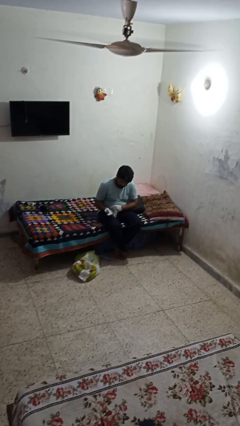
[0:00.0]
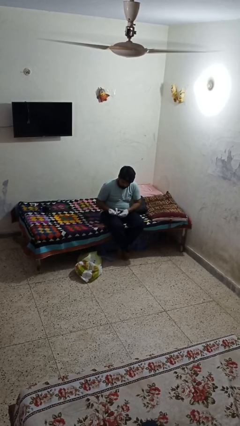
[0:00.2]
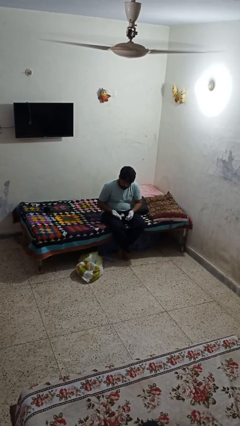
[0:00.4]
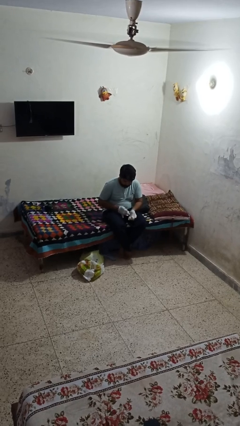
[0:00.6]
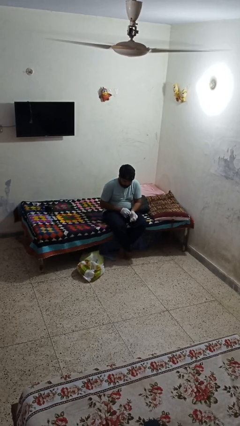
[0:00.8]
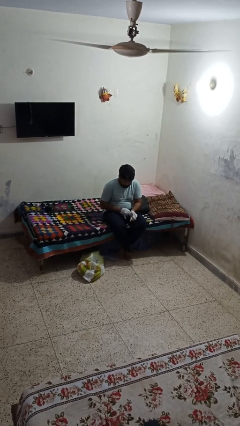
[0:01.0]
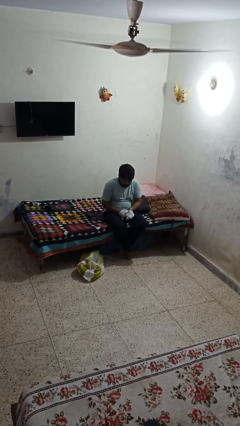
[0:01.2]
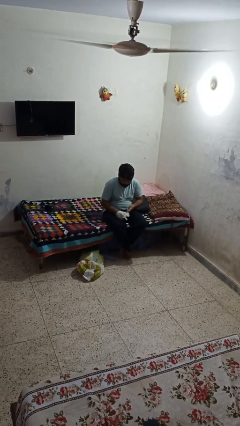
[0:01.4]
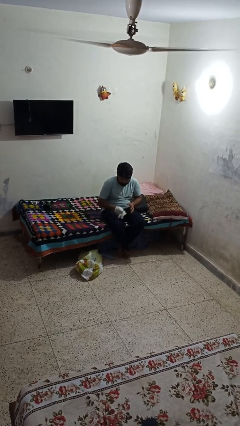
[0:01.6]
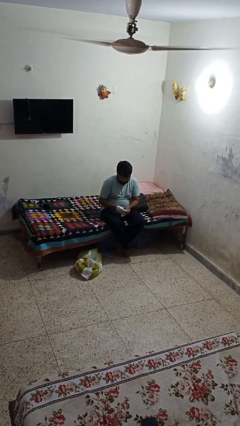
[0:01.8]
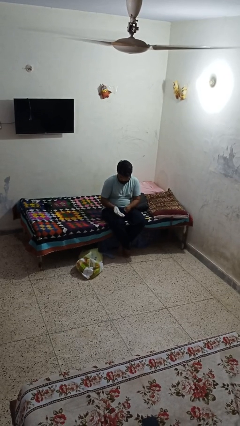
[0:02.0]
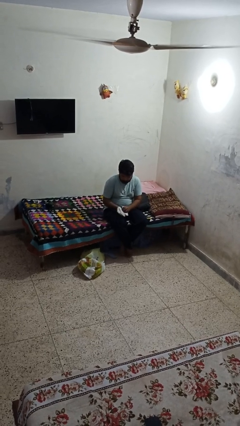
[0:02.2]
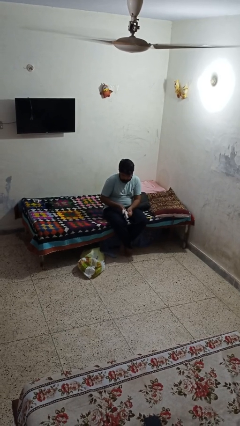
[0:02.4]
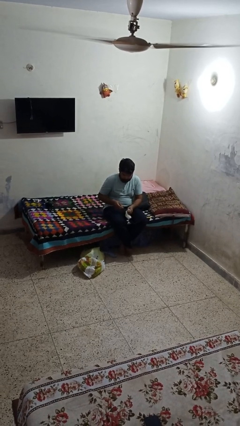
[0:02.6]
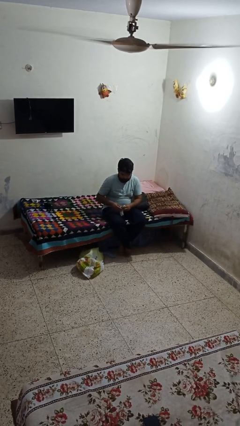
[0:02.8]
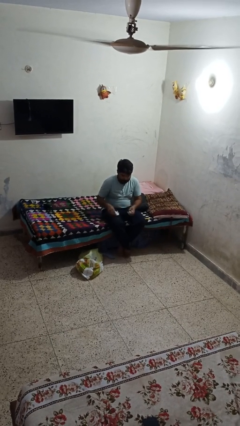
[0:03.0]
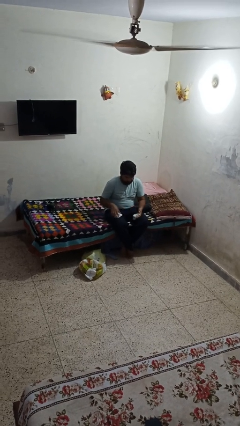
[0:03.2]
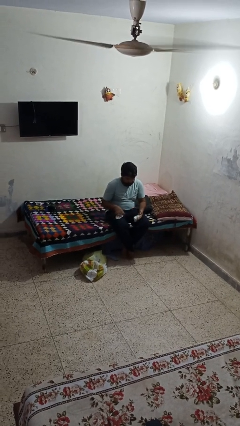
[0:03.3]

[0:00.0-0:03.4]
person takes off gloves

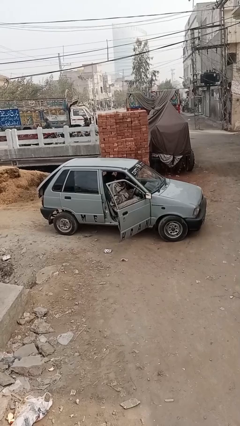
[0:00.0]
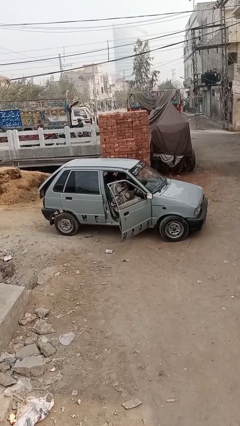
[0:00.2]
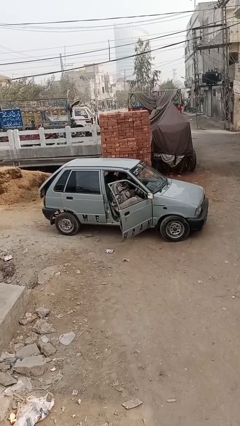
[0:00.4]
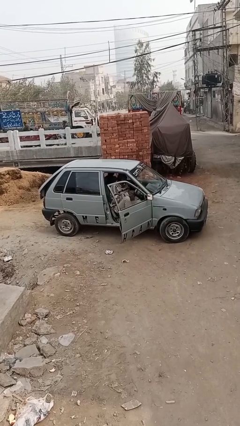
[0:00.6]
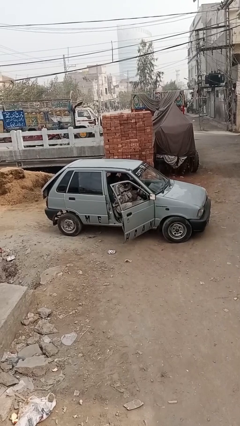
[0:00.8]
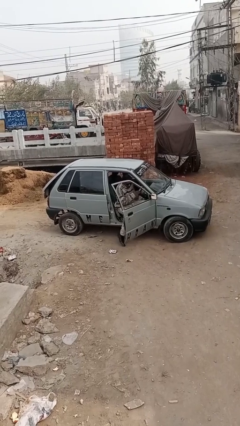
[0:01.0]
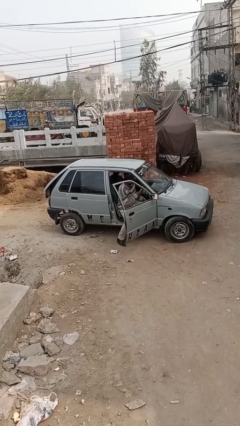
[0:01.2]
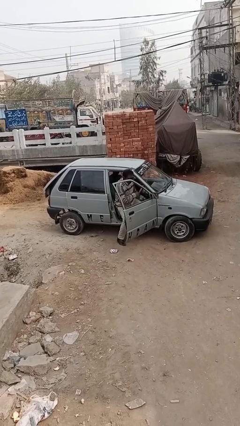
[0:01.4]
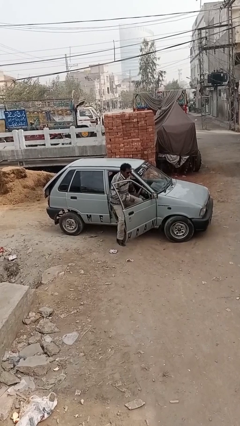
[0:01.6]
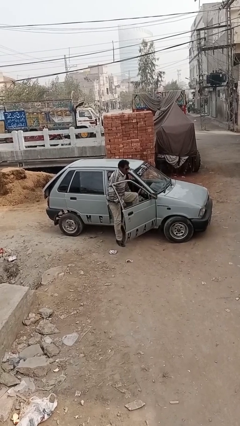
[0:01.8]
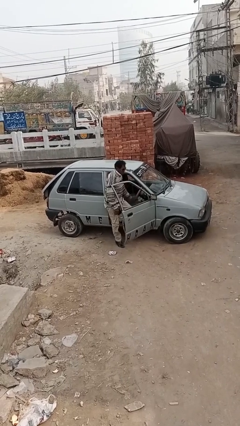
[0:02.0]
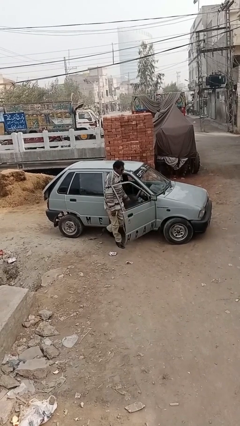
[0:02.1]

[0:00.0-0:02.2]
person exits car

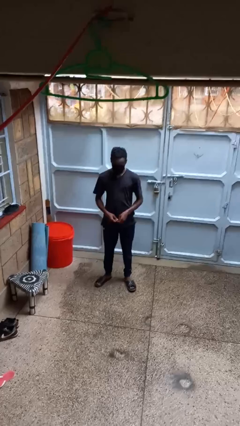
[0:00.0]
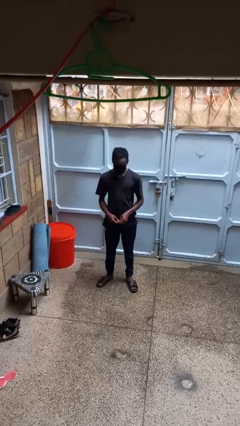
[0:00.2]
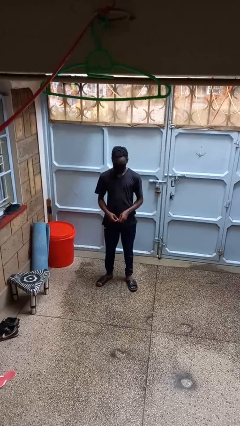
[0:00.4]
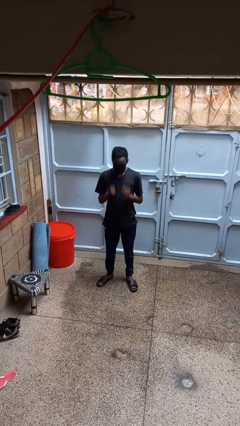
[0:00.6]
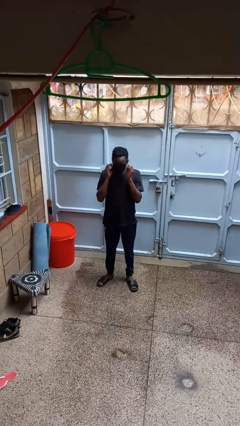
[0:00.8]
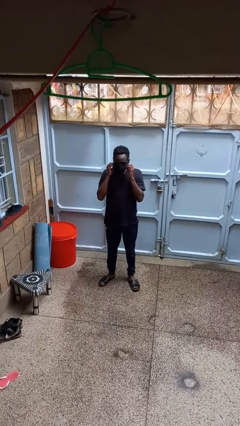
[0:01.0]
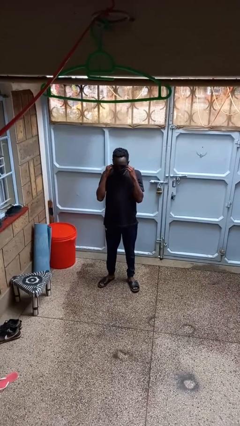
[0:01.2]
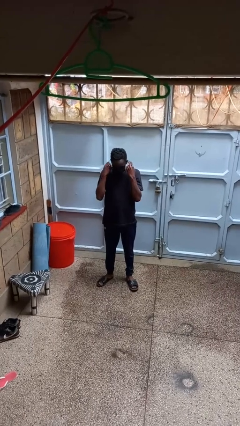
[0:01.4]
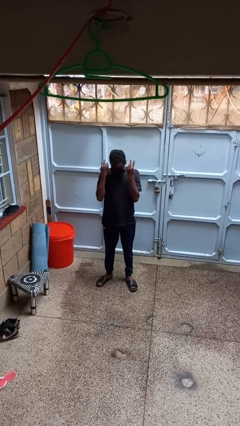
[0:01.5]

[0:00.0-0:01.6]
person takes off facemask

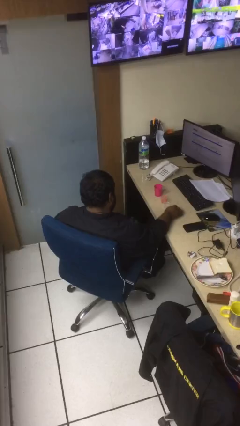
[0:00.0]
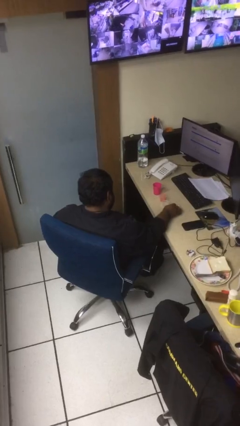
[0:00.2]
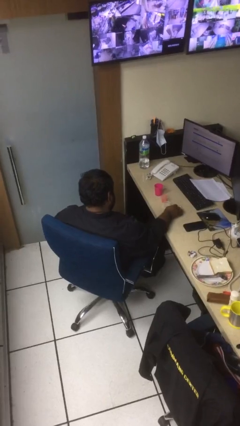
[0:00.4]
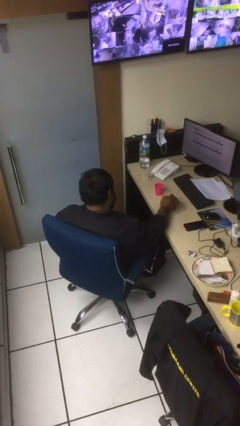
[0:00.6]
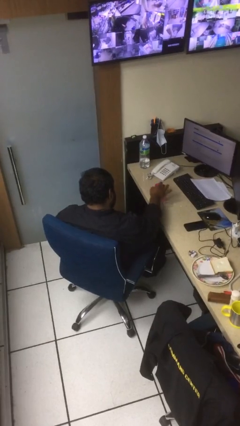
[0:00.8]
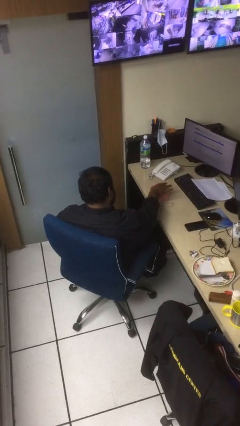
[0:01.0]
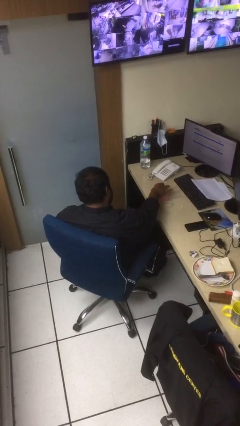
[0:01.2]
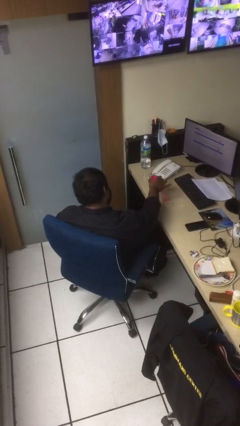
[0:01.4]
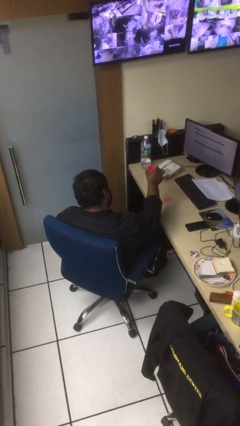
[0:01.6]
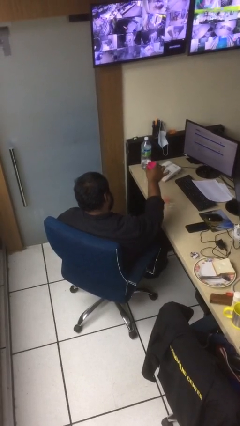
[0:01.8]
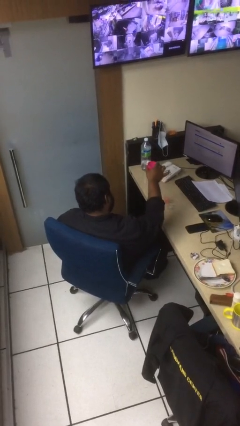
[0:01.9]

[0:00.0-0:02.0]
person picks up object from table

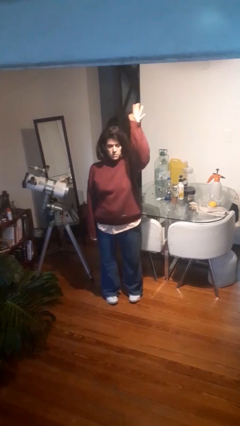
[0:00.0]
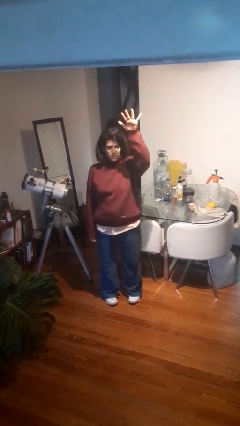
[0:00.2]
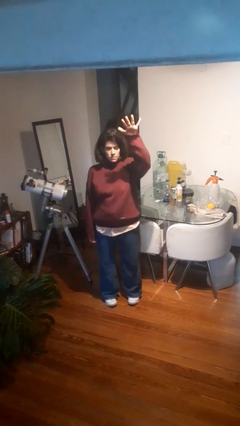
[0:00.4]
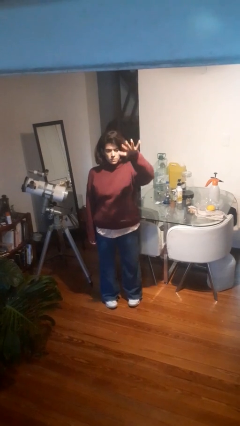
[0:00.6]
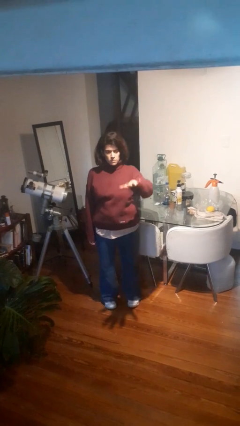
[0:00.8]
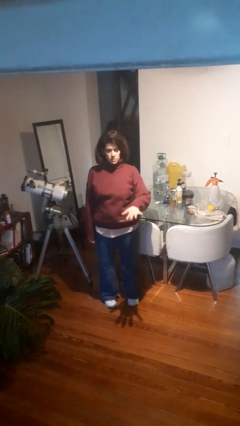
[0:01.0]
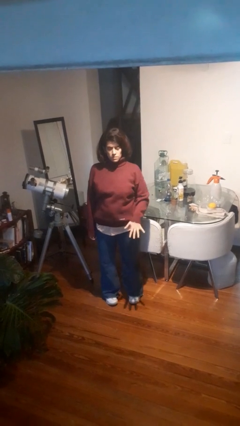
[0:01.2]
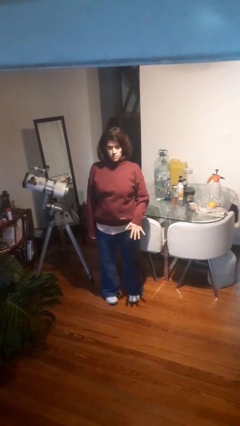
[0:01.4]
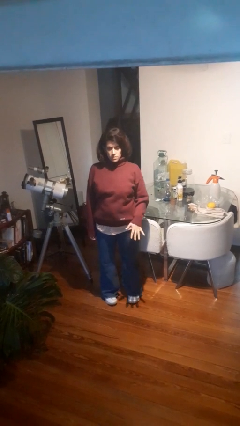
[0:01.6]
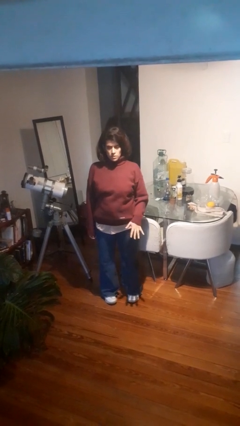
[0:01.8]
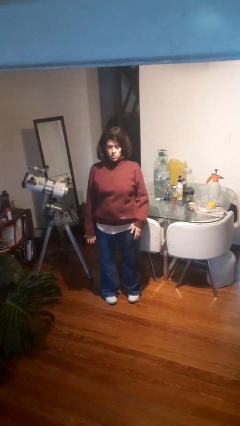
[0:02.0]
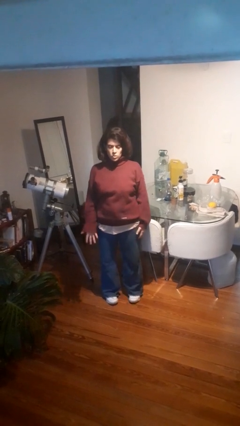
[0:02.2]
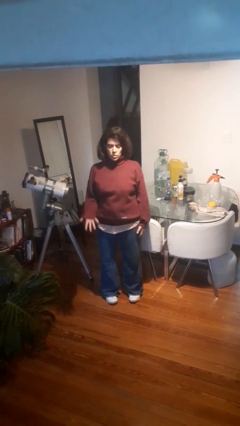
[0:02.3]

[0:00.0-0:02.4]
person gestures swipe down

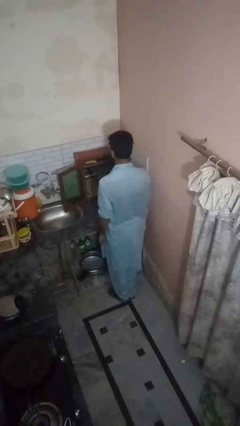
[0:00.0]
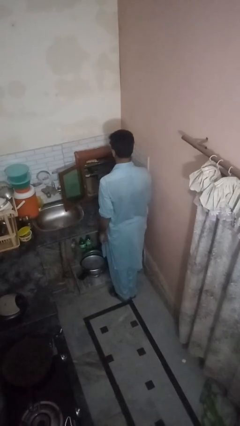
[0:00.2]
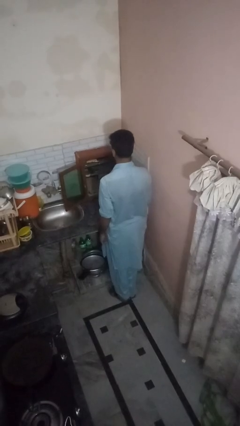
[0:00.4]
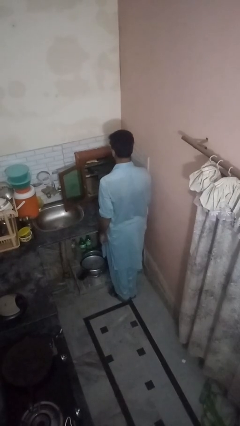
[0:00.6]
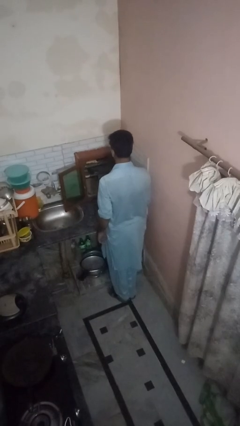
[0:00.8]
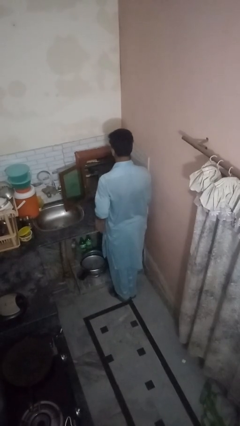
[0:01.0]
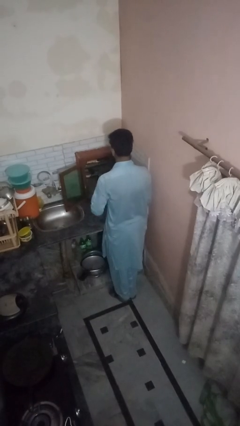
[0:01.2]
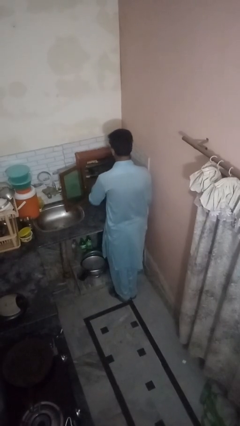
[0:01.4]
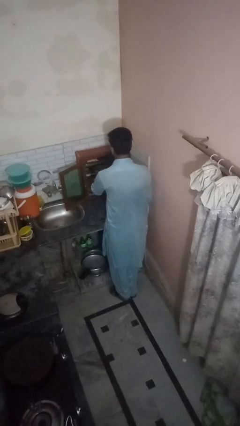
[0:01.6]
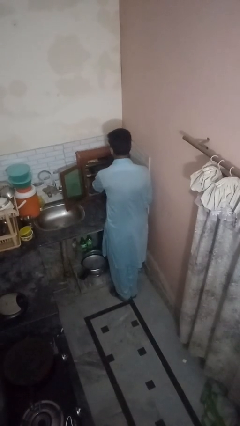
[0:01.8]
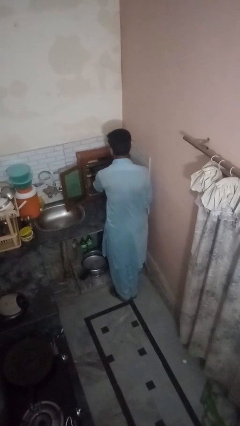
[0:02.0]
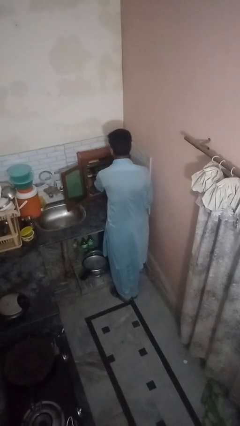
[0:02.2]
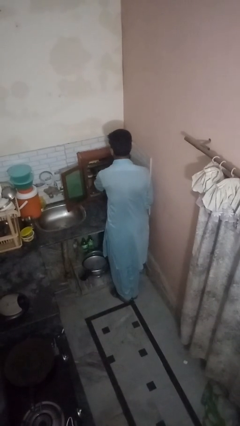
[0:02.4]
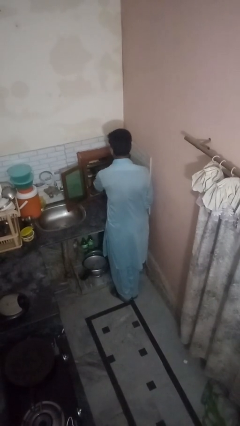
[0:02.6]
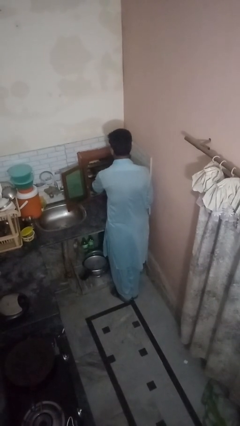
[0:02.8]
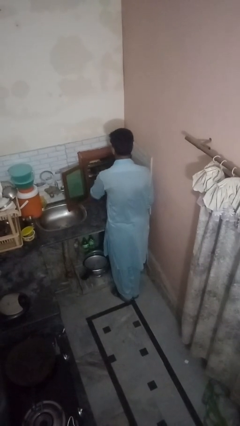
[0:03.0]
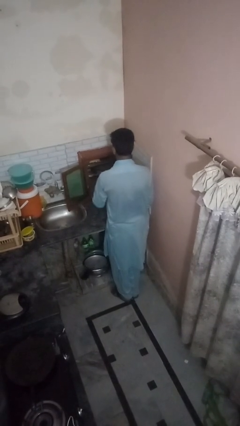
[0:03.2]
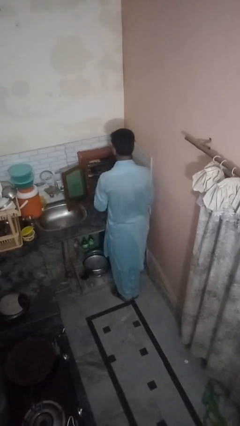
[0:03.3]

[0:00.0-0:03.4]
person takes object from kitchen drawer

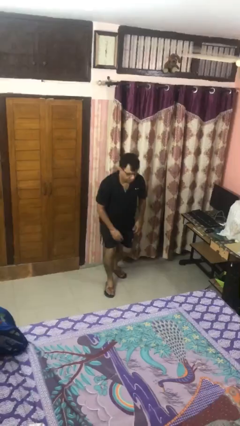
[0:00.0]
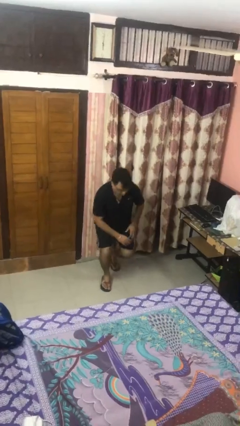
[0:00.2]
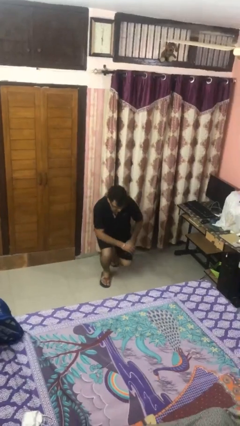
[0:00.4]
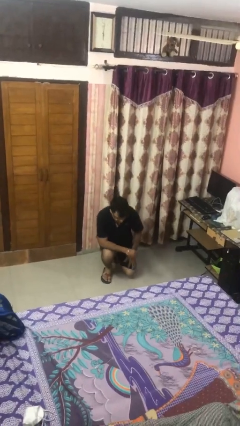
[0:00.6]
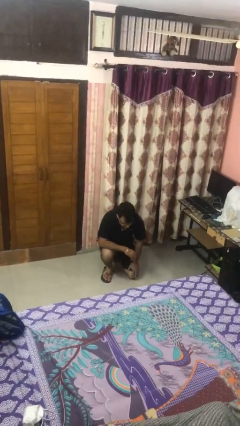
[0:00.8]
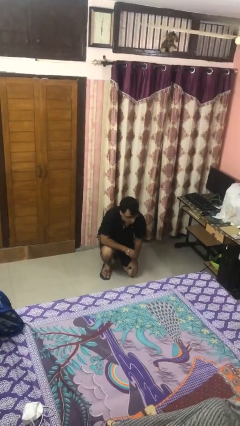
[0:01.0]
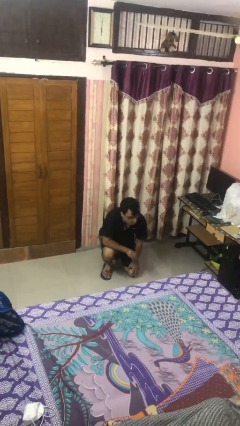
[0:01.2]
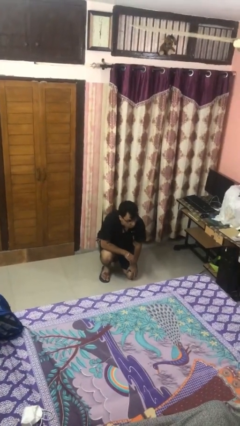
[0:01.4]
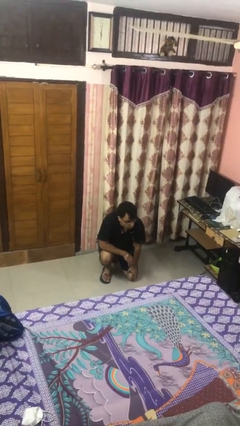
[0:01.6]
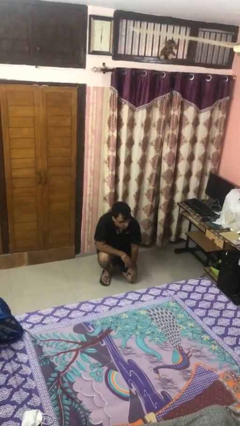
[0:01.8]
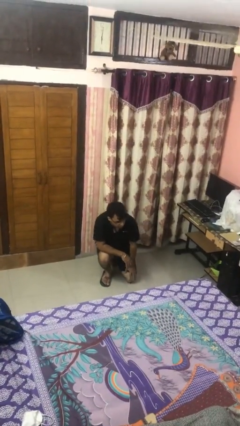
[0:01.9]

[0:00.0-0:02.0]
person kneels
